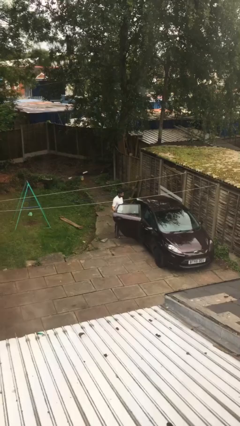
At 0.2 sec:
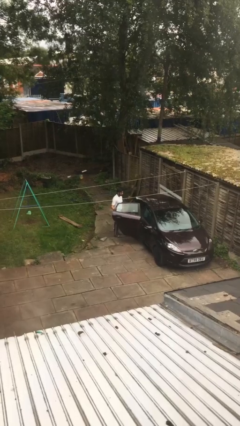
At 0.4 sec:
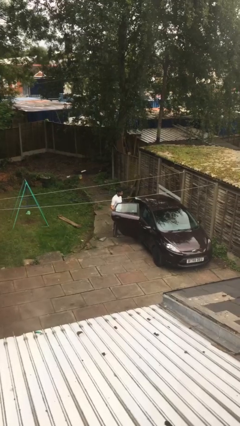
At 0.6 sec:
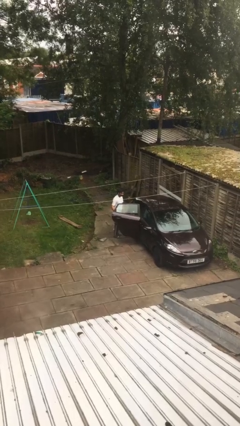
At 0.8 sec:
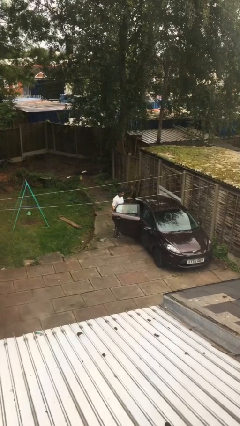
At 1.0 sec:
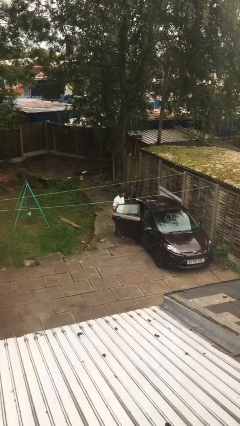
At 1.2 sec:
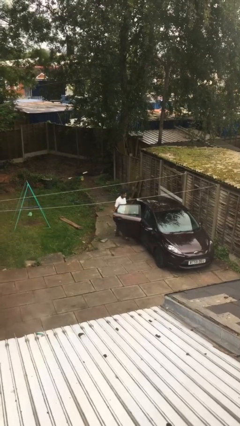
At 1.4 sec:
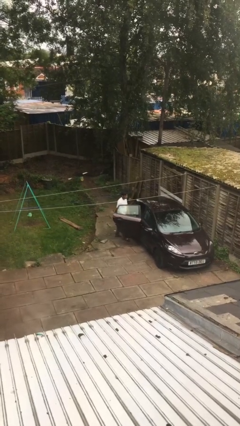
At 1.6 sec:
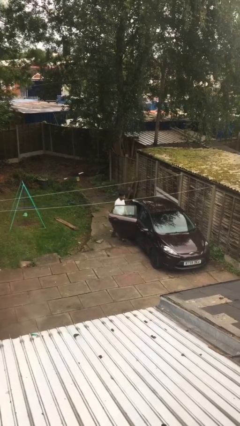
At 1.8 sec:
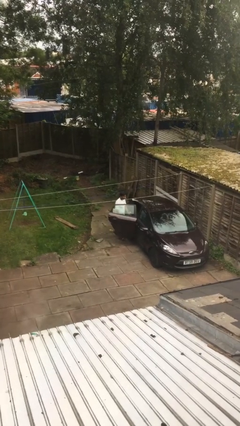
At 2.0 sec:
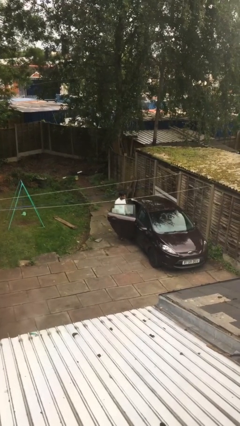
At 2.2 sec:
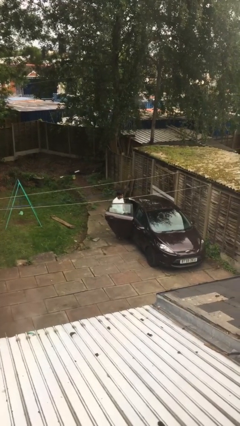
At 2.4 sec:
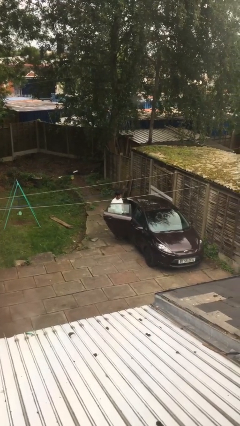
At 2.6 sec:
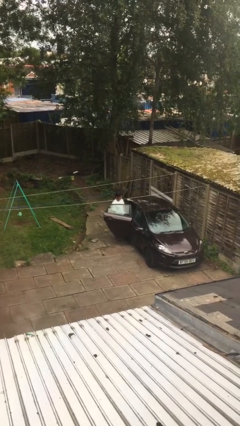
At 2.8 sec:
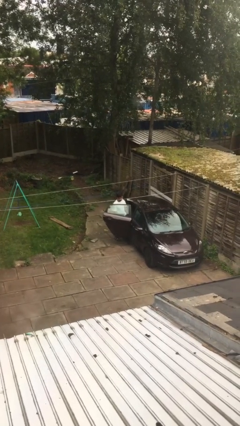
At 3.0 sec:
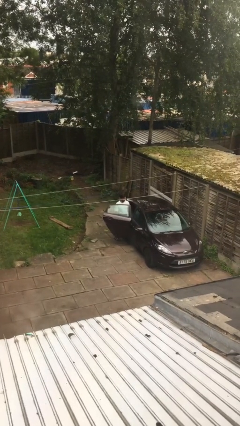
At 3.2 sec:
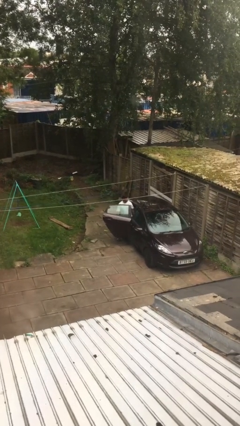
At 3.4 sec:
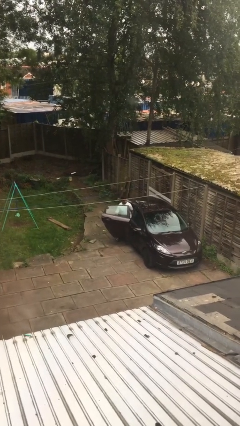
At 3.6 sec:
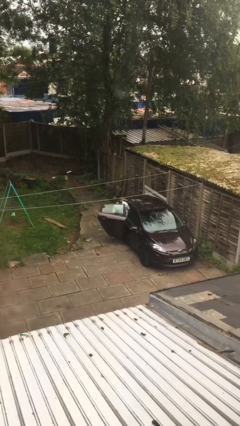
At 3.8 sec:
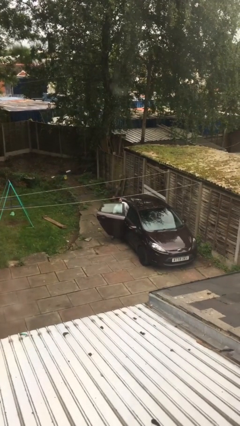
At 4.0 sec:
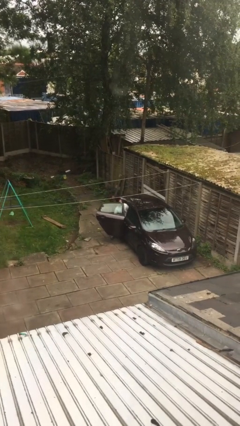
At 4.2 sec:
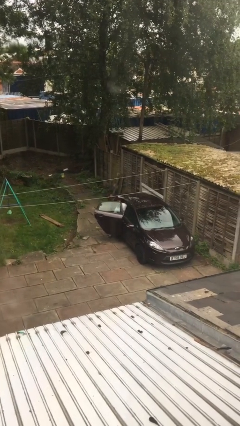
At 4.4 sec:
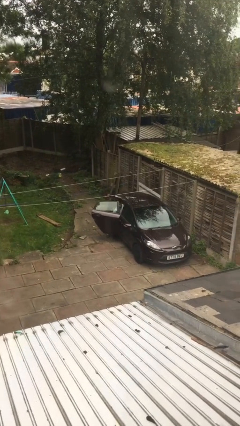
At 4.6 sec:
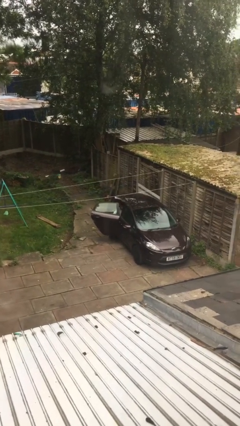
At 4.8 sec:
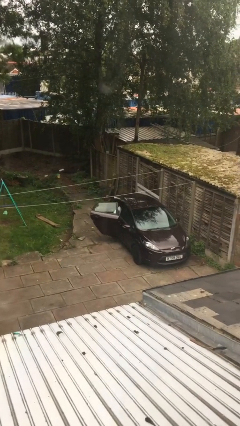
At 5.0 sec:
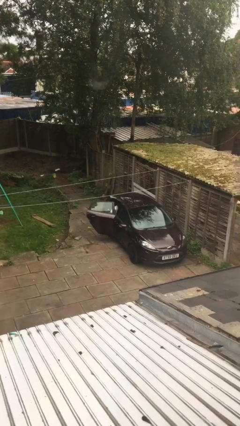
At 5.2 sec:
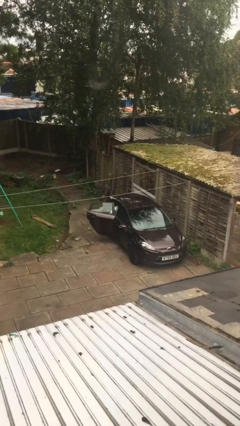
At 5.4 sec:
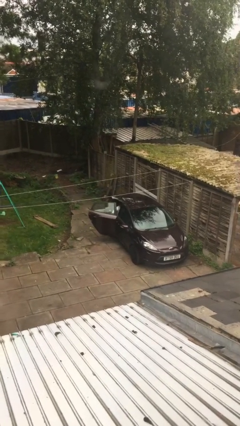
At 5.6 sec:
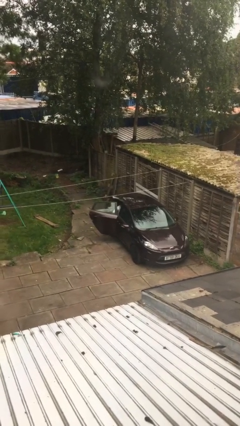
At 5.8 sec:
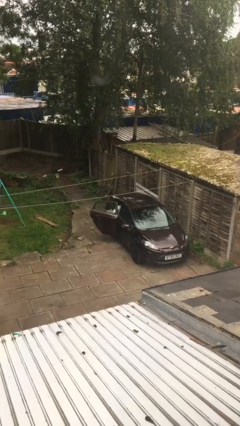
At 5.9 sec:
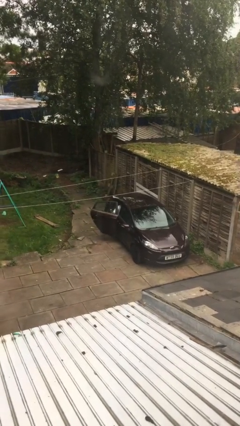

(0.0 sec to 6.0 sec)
person enters car

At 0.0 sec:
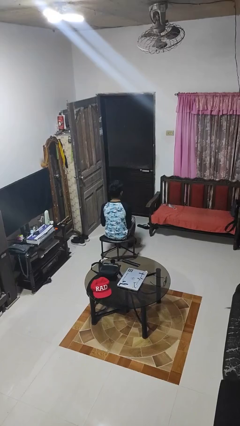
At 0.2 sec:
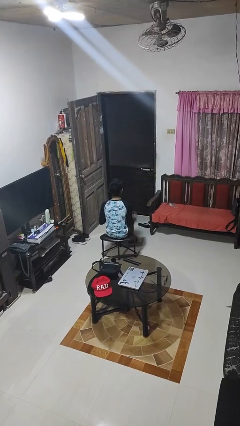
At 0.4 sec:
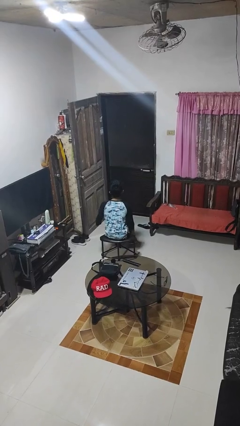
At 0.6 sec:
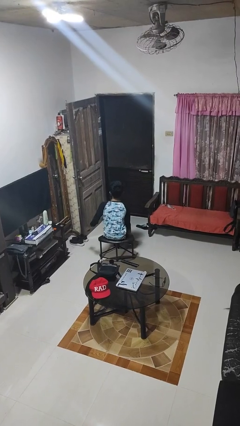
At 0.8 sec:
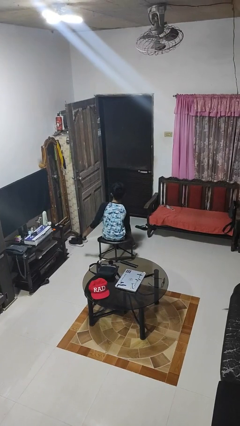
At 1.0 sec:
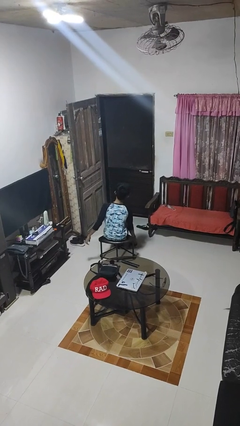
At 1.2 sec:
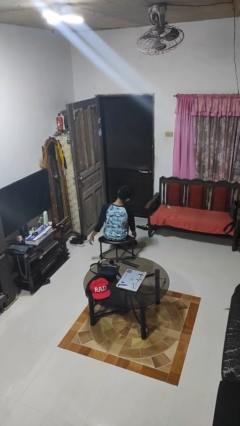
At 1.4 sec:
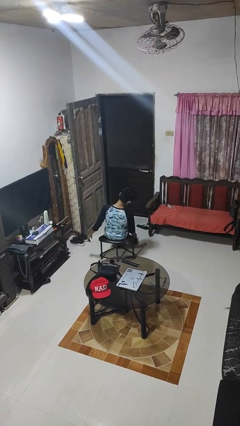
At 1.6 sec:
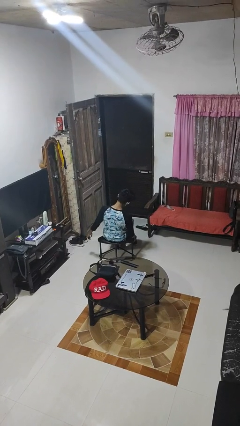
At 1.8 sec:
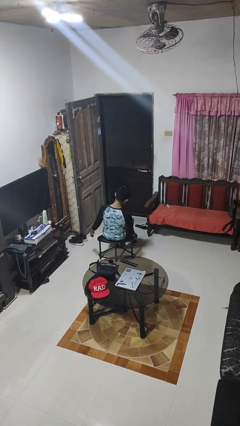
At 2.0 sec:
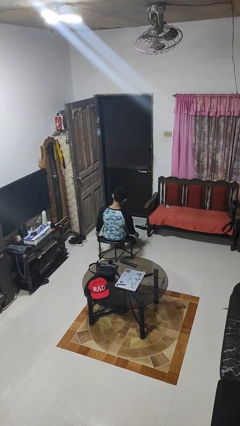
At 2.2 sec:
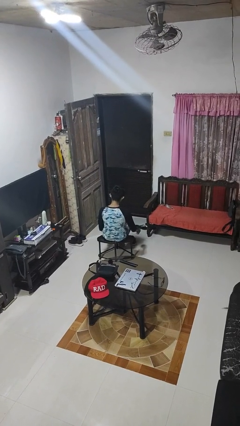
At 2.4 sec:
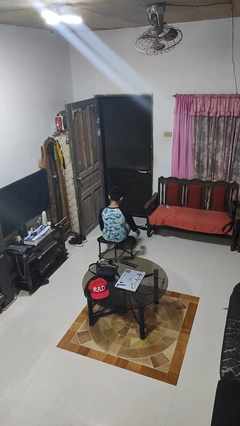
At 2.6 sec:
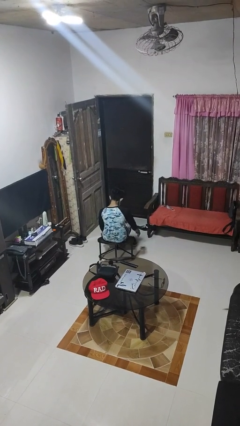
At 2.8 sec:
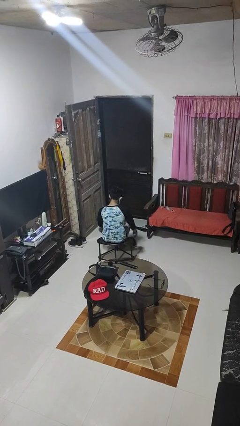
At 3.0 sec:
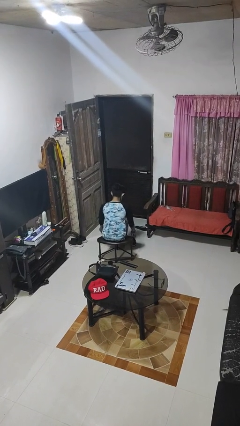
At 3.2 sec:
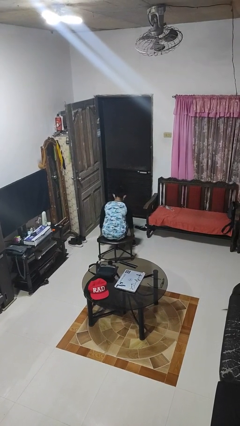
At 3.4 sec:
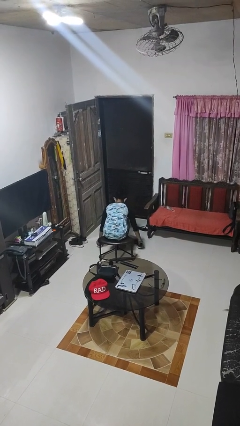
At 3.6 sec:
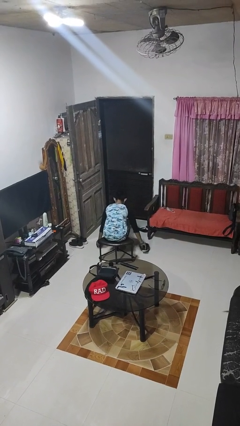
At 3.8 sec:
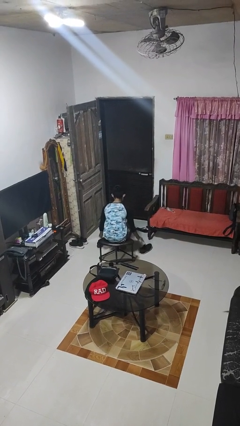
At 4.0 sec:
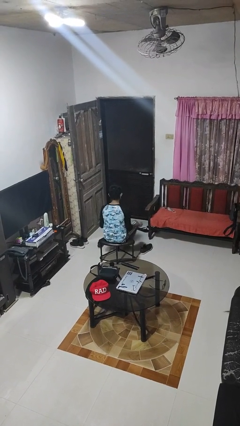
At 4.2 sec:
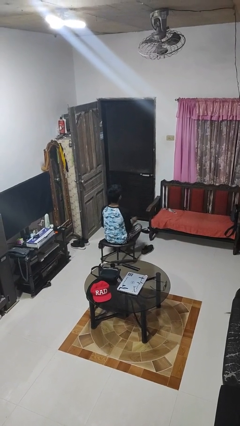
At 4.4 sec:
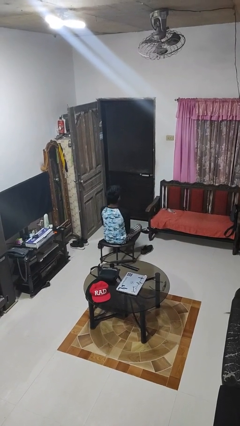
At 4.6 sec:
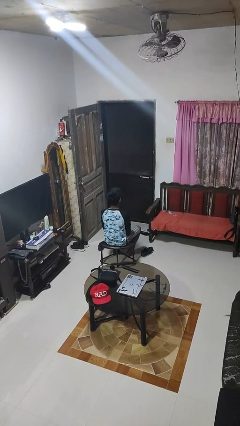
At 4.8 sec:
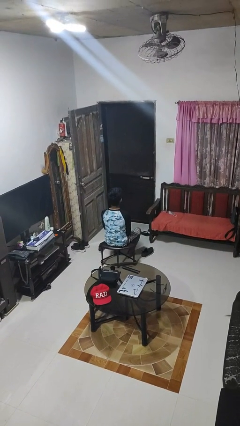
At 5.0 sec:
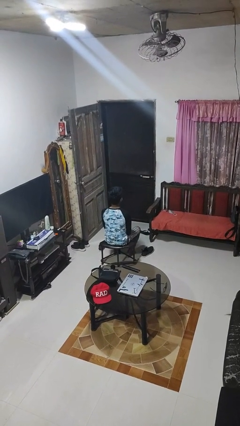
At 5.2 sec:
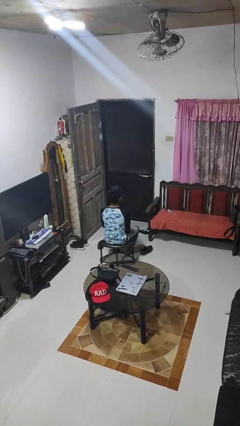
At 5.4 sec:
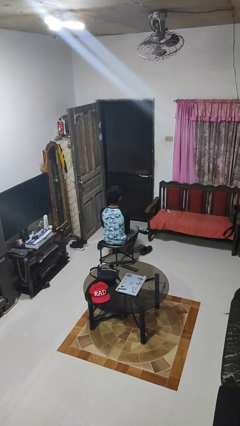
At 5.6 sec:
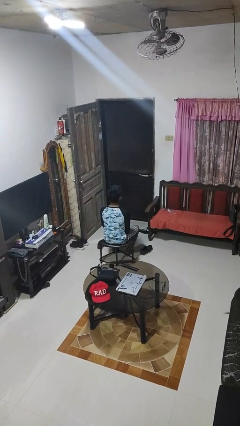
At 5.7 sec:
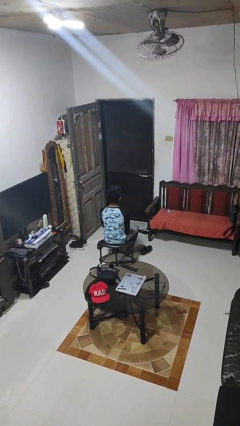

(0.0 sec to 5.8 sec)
person takes off gloves

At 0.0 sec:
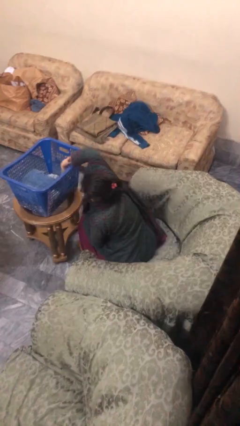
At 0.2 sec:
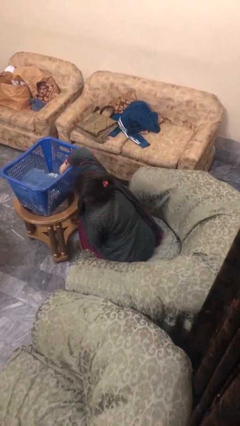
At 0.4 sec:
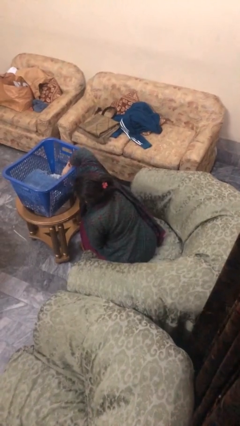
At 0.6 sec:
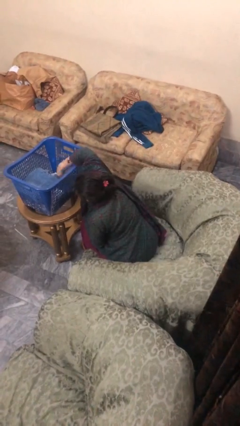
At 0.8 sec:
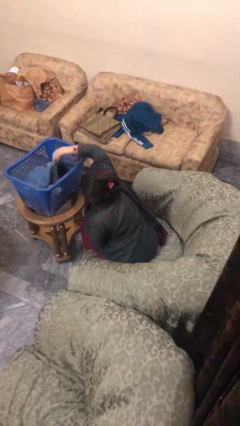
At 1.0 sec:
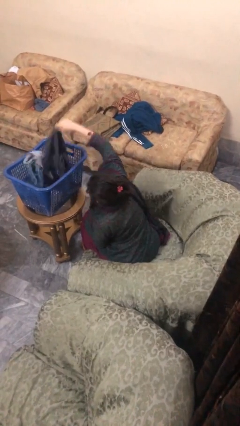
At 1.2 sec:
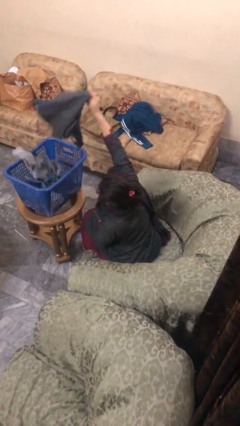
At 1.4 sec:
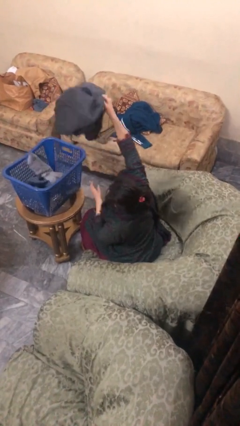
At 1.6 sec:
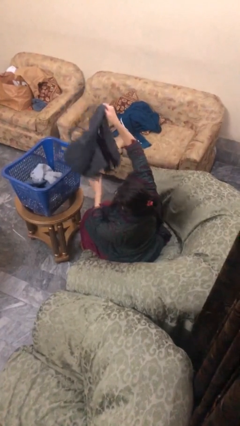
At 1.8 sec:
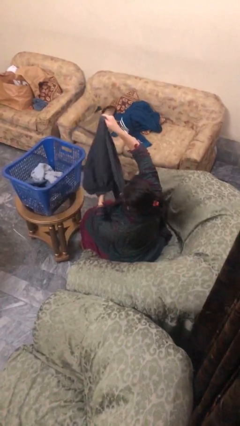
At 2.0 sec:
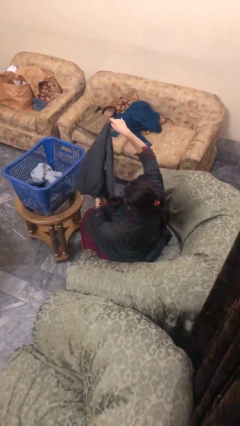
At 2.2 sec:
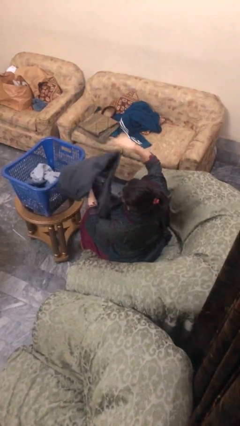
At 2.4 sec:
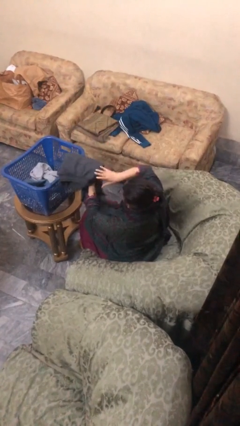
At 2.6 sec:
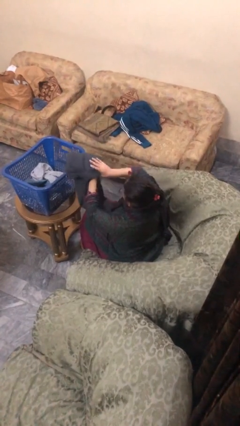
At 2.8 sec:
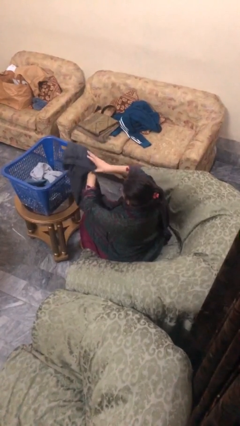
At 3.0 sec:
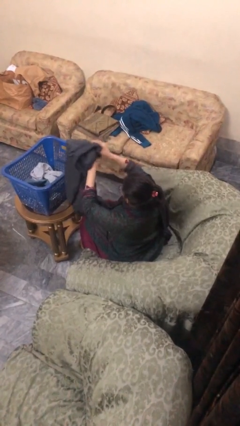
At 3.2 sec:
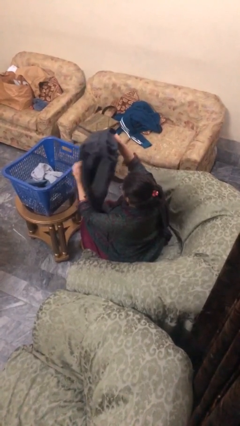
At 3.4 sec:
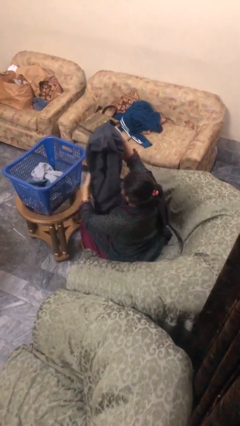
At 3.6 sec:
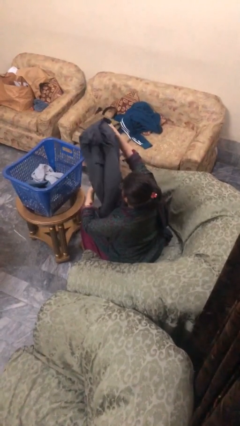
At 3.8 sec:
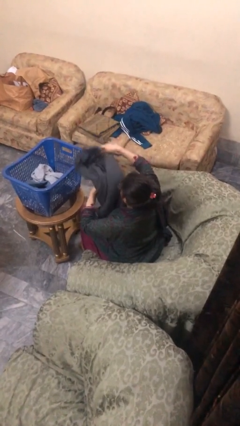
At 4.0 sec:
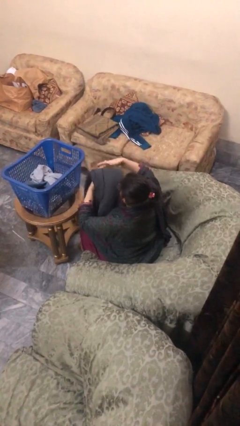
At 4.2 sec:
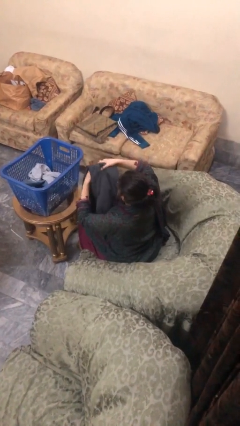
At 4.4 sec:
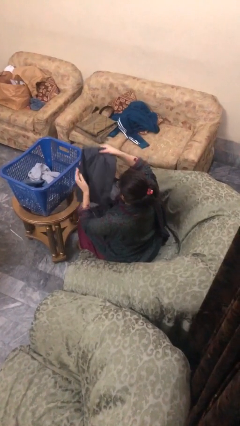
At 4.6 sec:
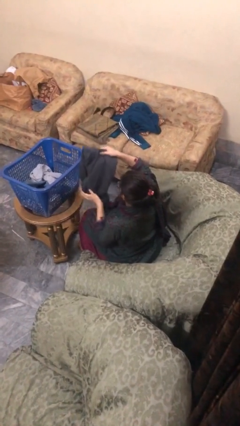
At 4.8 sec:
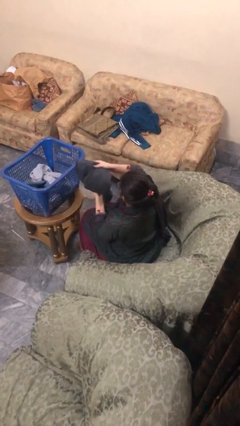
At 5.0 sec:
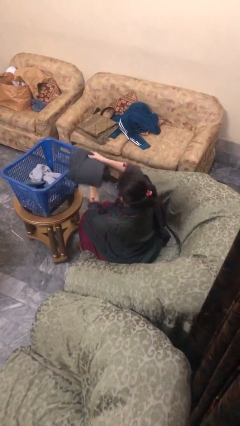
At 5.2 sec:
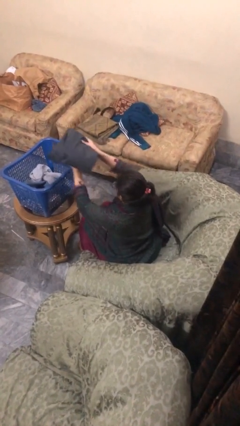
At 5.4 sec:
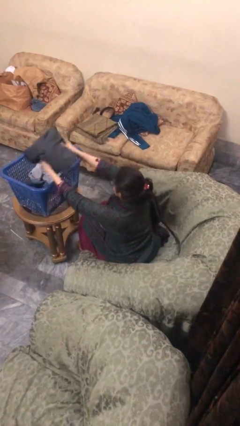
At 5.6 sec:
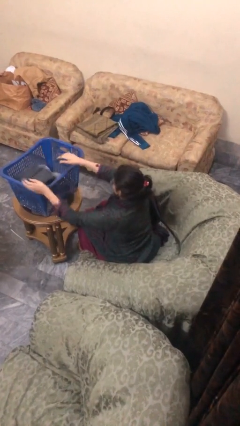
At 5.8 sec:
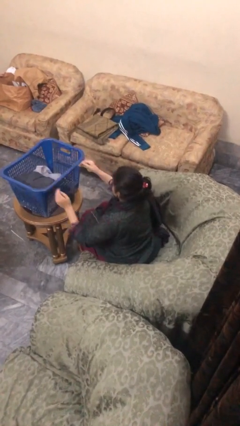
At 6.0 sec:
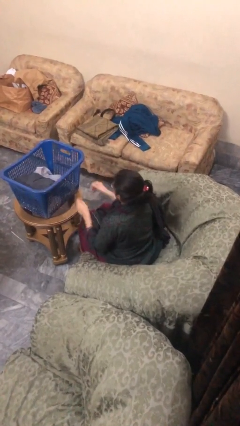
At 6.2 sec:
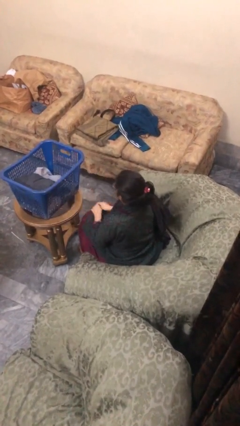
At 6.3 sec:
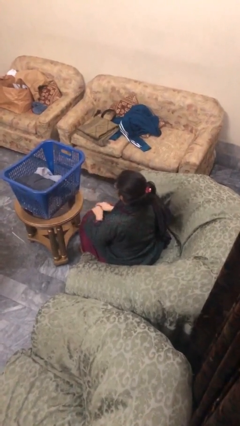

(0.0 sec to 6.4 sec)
person folds pants
